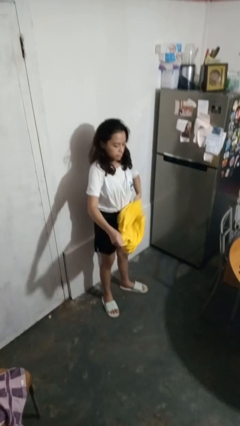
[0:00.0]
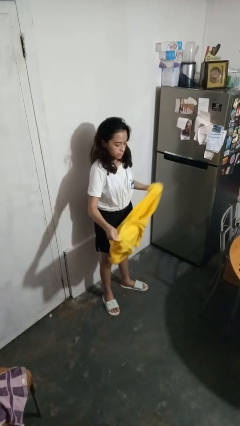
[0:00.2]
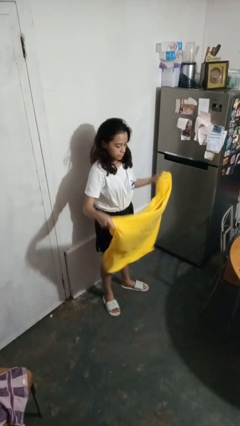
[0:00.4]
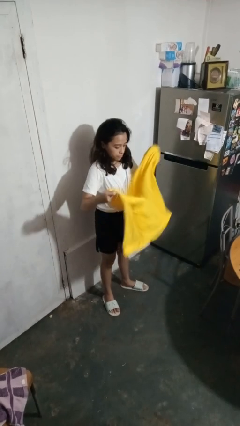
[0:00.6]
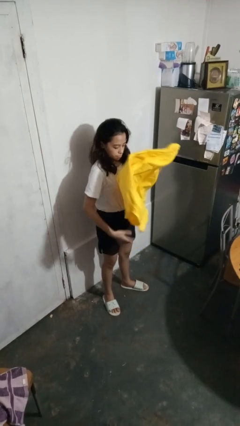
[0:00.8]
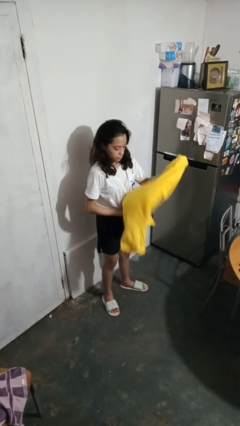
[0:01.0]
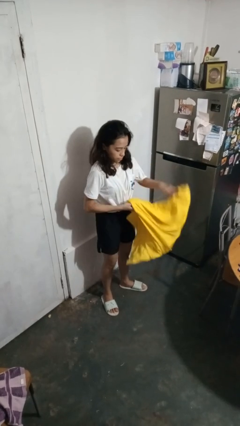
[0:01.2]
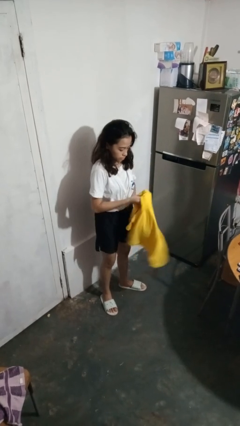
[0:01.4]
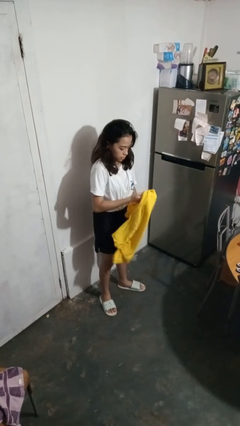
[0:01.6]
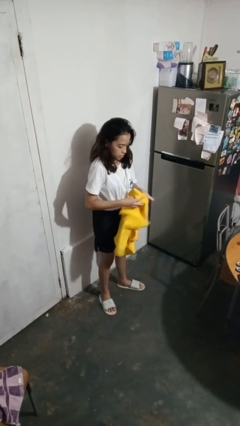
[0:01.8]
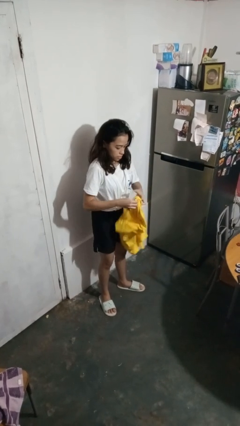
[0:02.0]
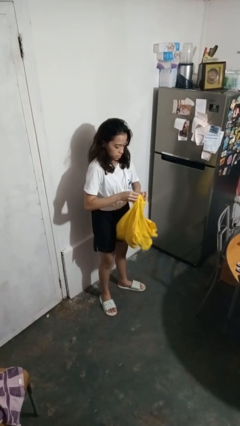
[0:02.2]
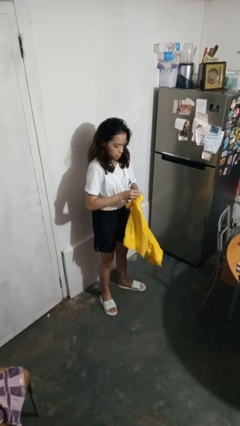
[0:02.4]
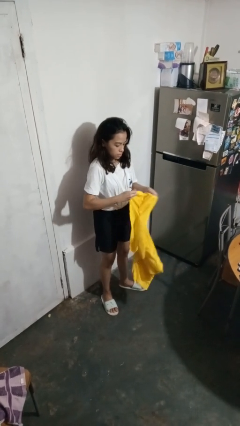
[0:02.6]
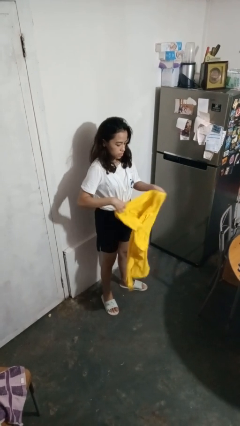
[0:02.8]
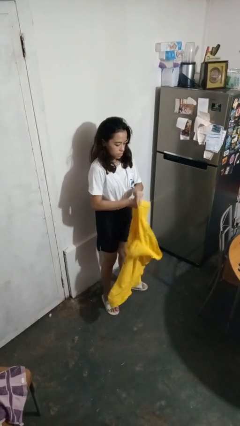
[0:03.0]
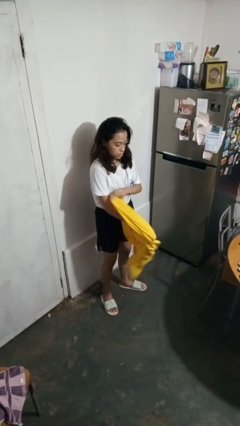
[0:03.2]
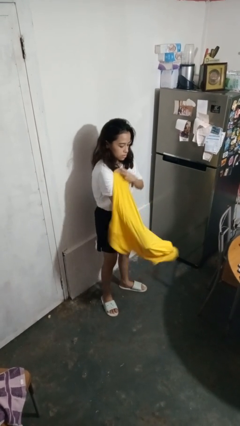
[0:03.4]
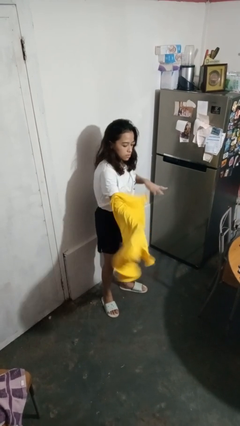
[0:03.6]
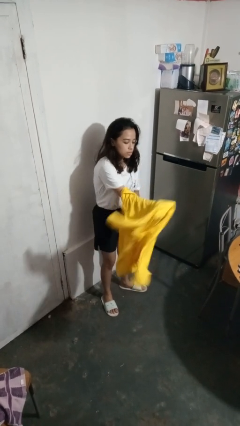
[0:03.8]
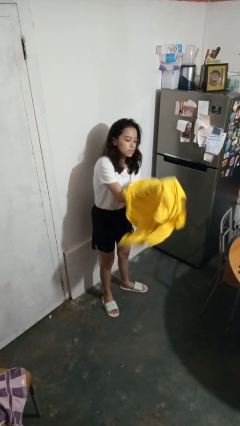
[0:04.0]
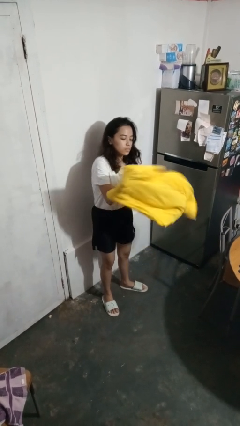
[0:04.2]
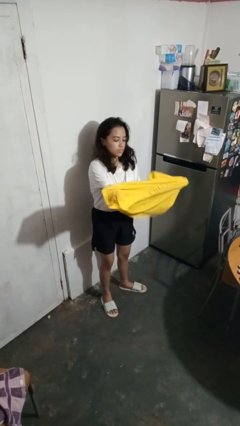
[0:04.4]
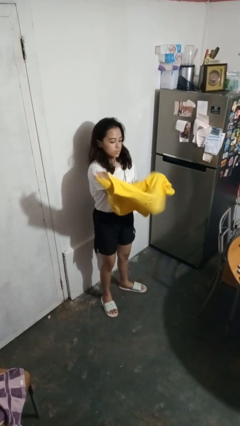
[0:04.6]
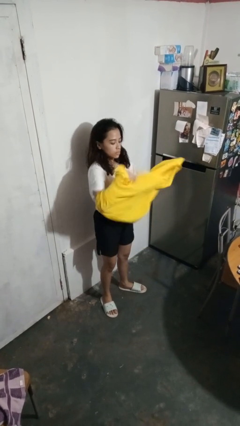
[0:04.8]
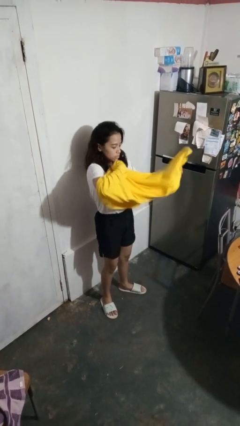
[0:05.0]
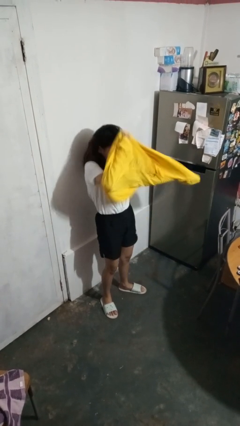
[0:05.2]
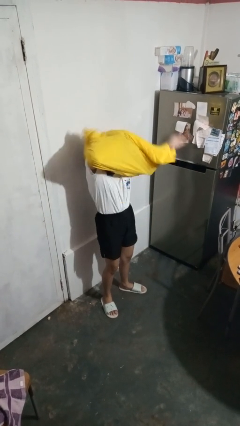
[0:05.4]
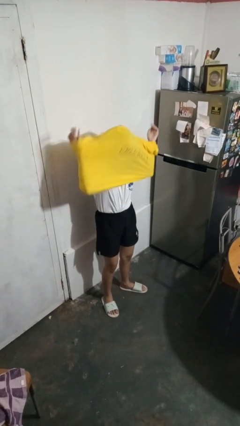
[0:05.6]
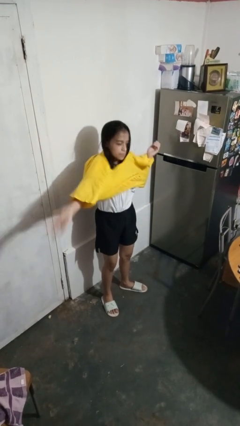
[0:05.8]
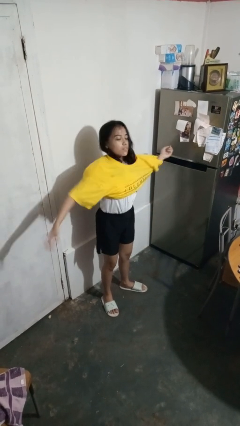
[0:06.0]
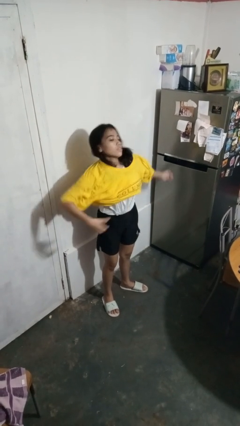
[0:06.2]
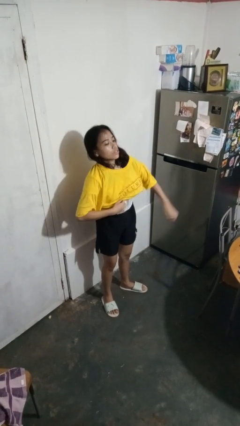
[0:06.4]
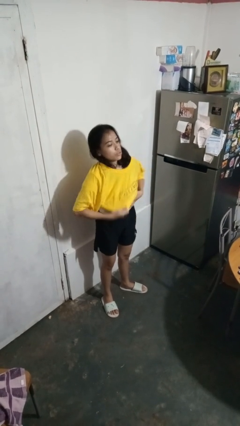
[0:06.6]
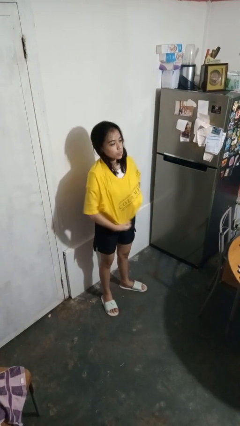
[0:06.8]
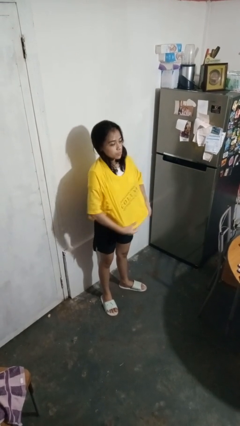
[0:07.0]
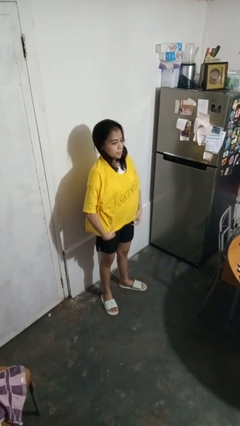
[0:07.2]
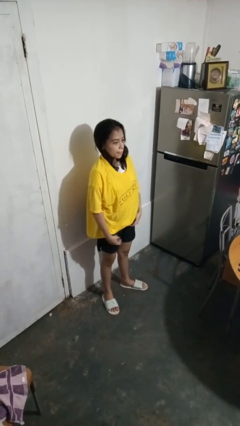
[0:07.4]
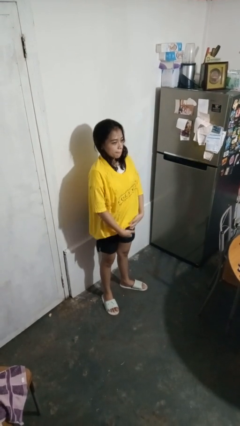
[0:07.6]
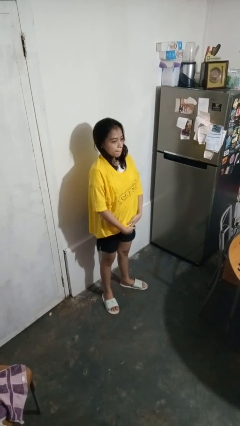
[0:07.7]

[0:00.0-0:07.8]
person puts on shirt

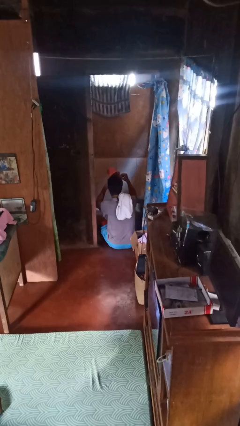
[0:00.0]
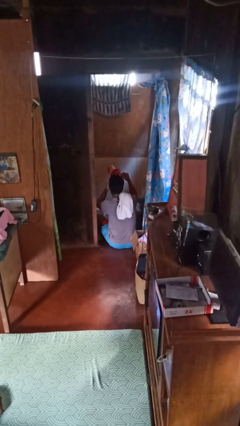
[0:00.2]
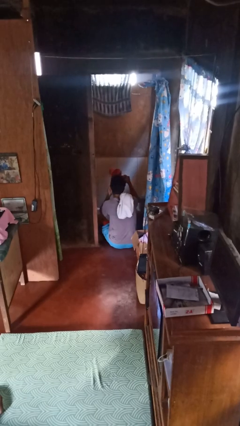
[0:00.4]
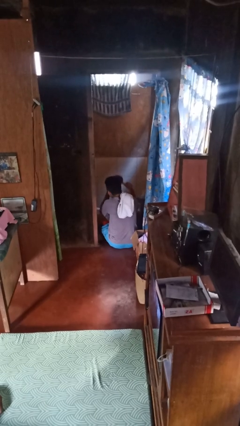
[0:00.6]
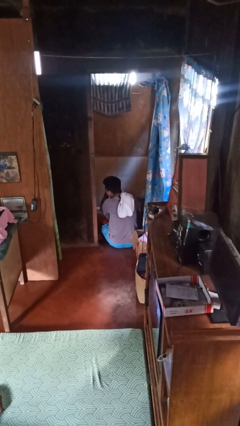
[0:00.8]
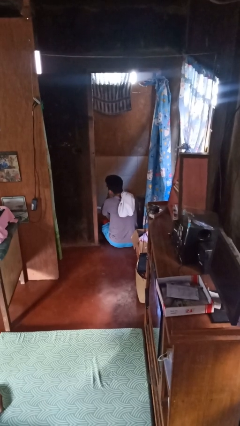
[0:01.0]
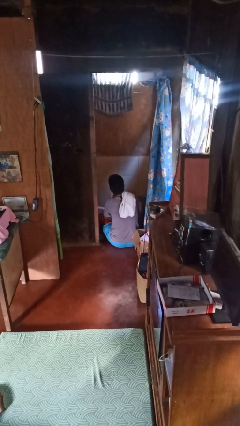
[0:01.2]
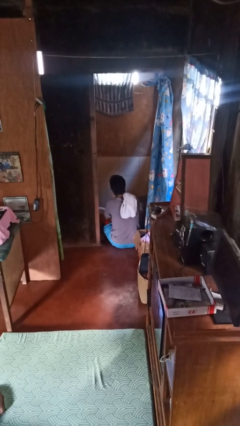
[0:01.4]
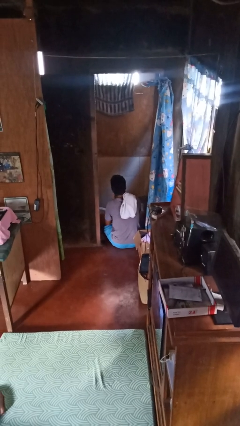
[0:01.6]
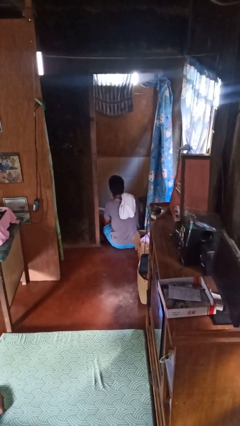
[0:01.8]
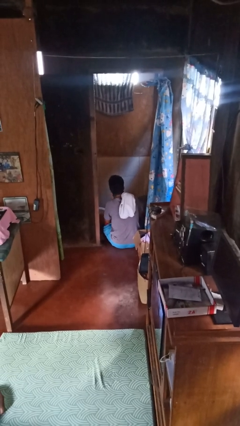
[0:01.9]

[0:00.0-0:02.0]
person washes face

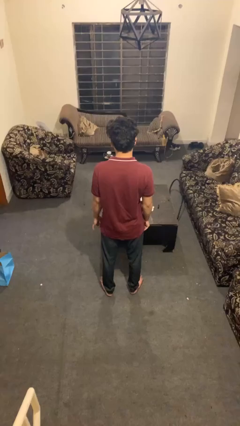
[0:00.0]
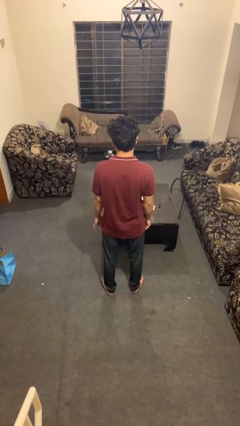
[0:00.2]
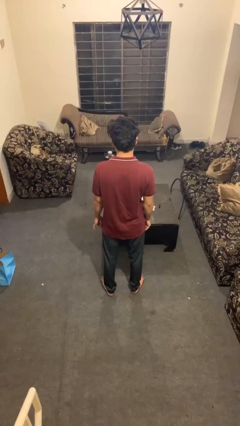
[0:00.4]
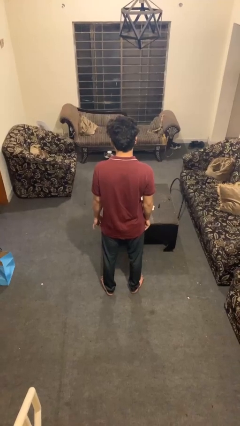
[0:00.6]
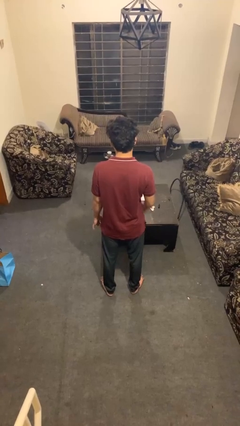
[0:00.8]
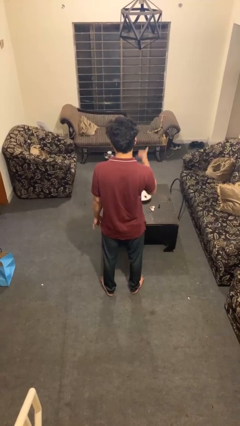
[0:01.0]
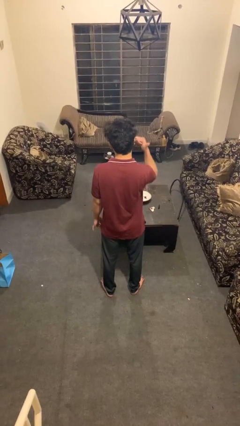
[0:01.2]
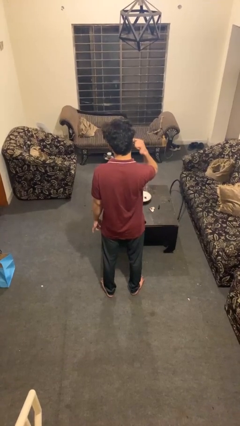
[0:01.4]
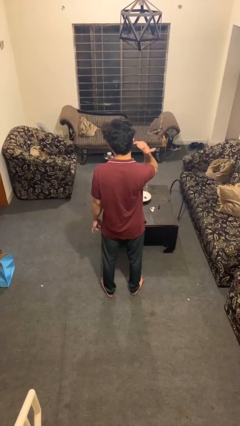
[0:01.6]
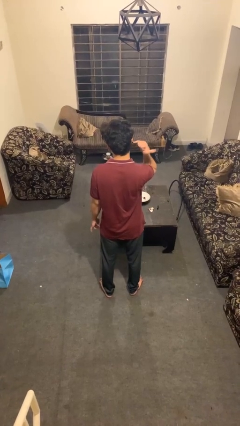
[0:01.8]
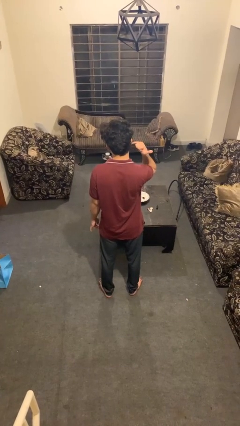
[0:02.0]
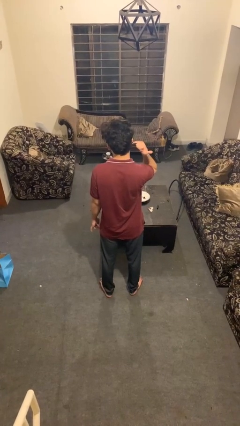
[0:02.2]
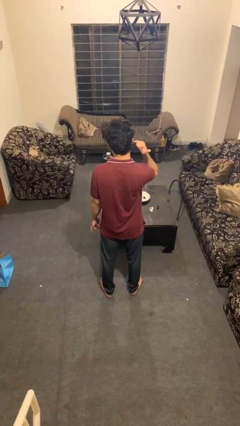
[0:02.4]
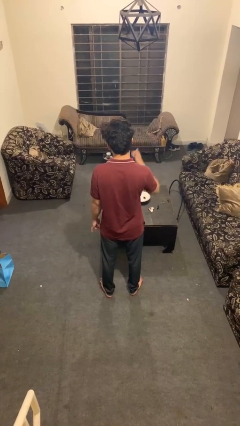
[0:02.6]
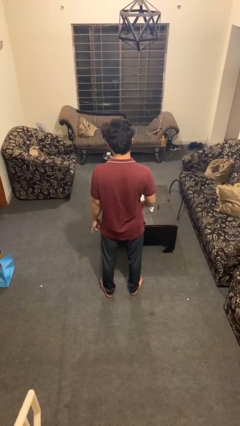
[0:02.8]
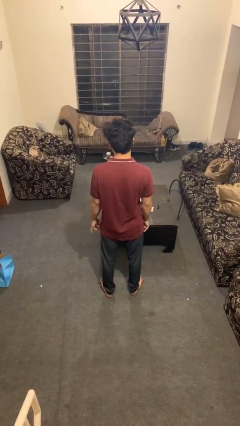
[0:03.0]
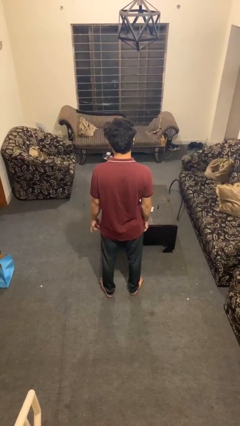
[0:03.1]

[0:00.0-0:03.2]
person gestures hang loose

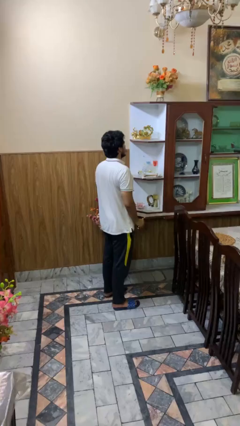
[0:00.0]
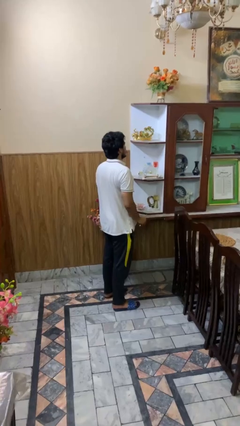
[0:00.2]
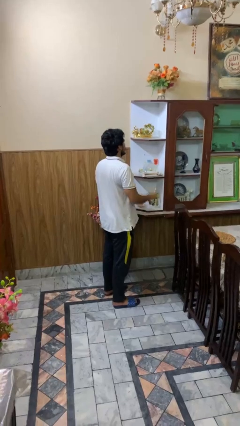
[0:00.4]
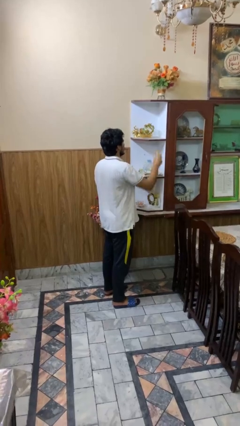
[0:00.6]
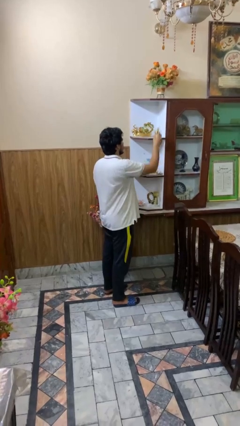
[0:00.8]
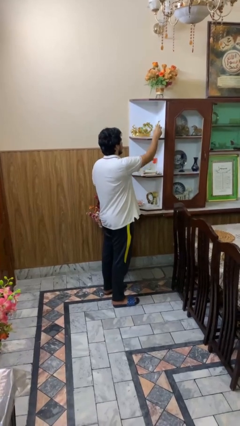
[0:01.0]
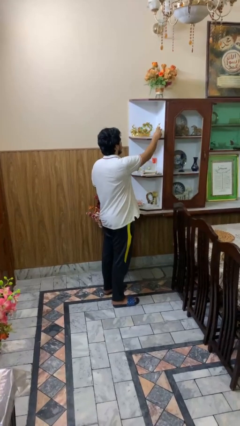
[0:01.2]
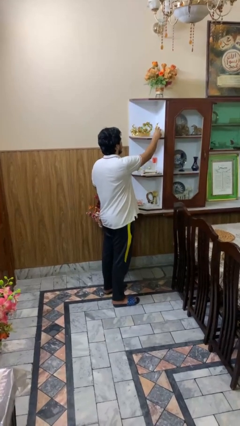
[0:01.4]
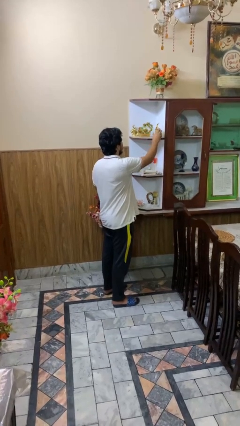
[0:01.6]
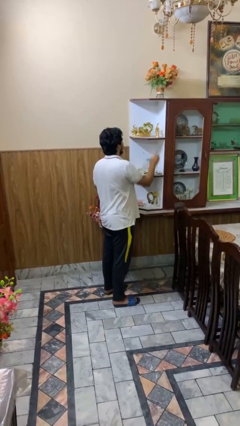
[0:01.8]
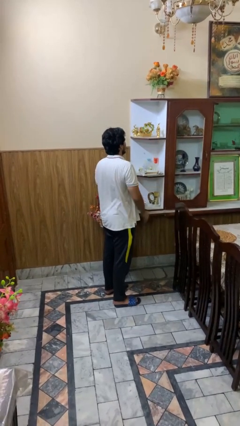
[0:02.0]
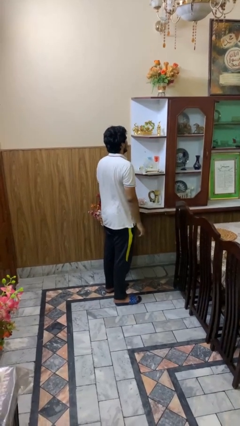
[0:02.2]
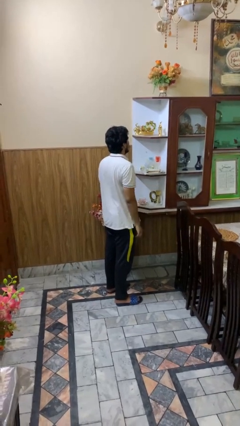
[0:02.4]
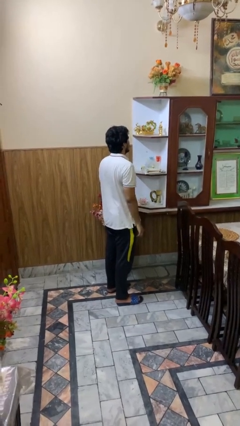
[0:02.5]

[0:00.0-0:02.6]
person puts down object on shelf

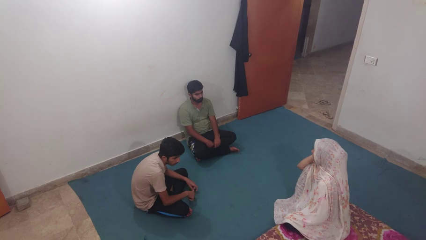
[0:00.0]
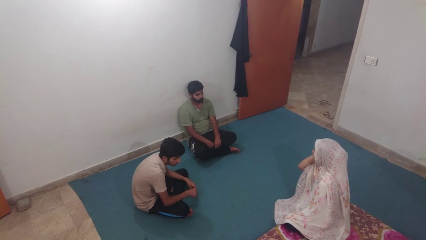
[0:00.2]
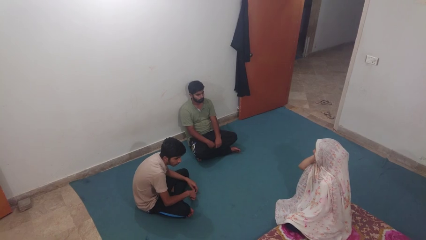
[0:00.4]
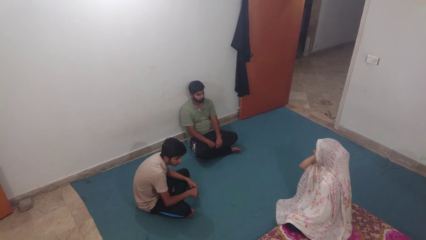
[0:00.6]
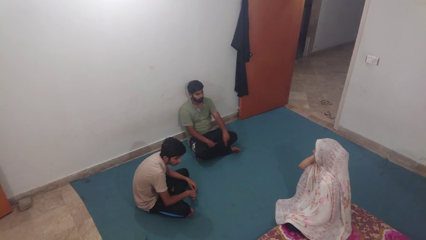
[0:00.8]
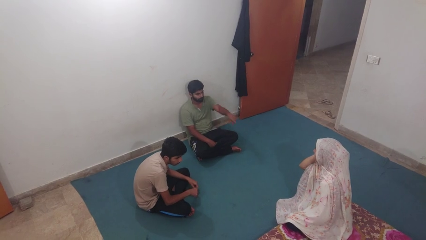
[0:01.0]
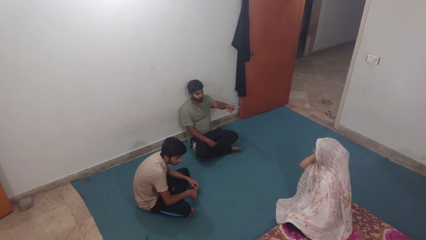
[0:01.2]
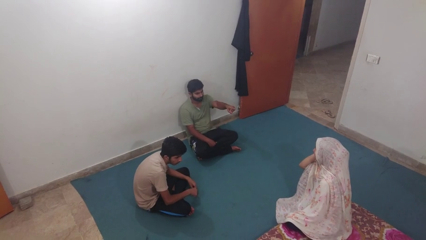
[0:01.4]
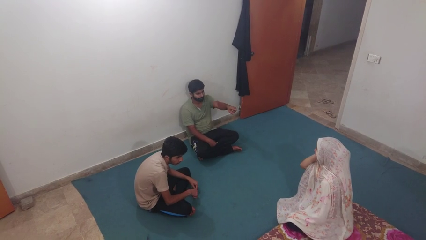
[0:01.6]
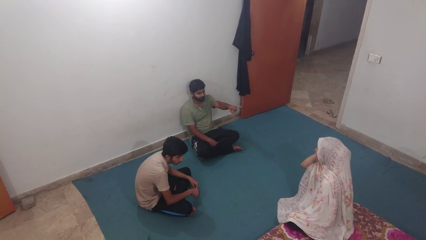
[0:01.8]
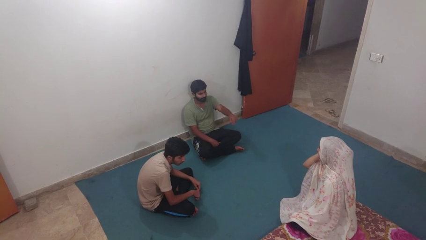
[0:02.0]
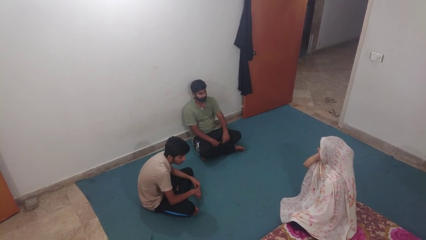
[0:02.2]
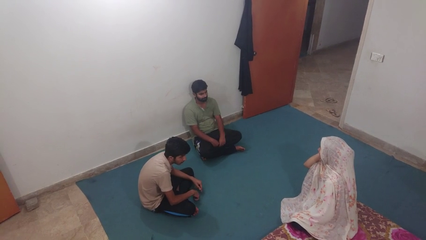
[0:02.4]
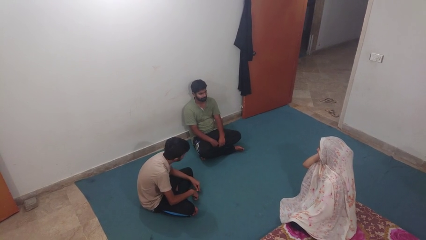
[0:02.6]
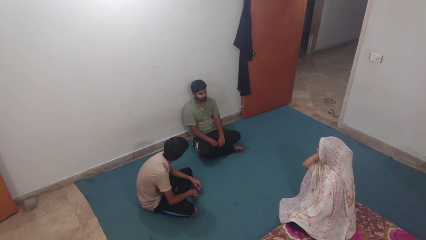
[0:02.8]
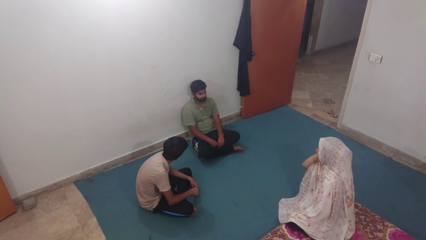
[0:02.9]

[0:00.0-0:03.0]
person points at person
